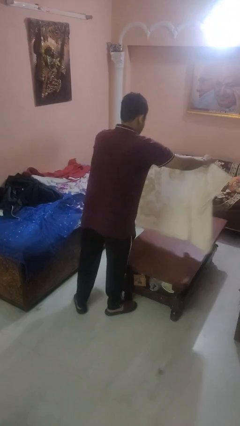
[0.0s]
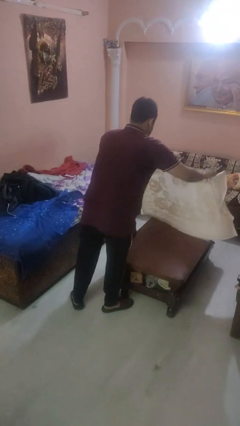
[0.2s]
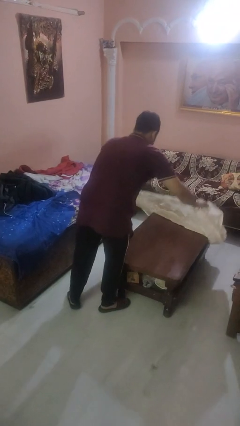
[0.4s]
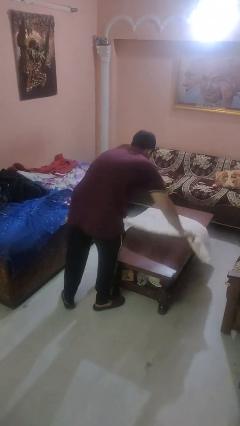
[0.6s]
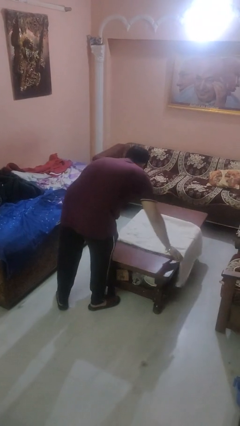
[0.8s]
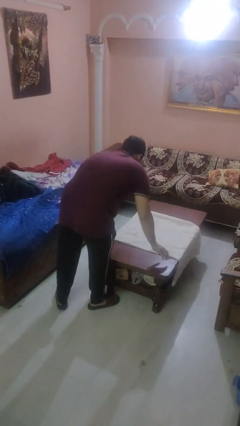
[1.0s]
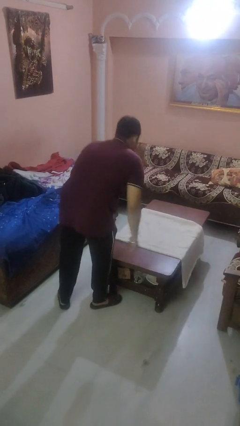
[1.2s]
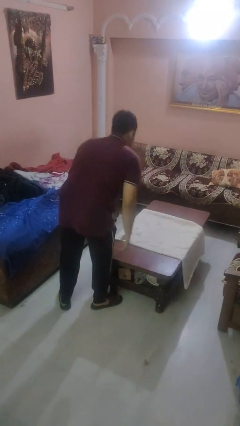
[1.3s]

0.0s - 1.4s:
person spreads tablecloth

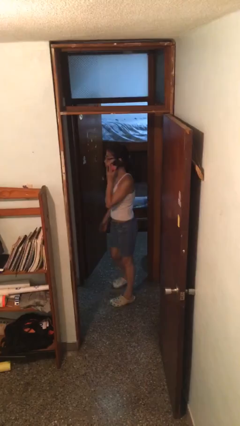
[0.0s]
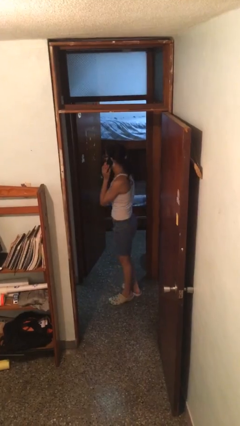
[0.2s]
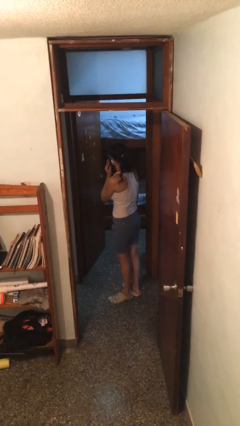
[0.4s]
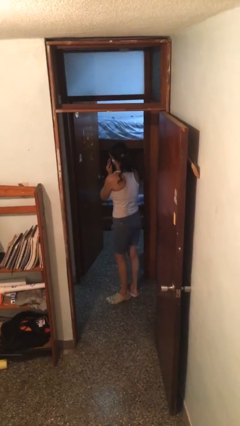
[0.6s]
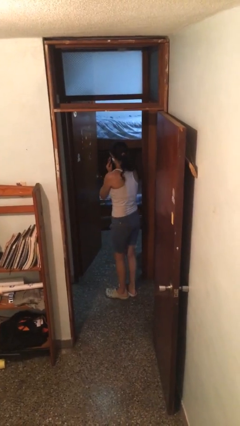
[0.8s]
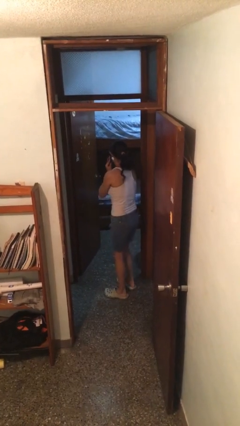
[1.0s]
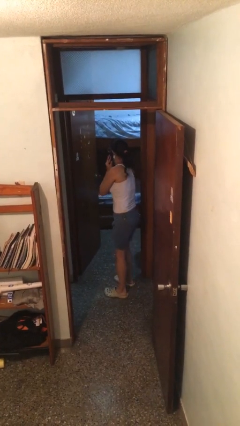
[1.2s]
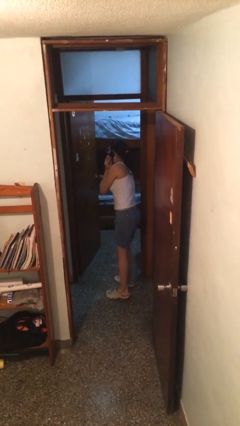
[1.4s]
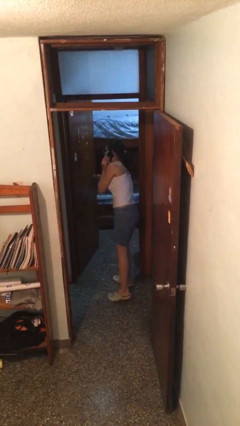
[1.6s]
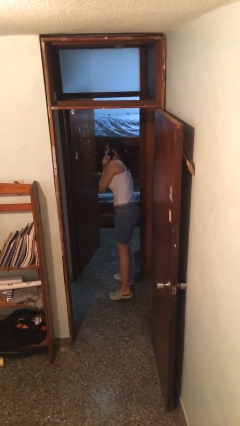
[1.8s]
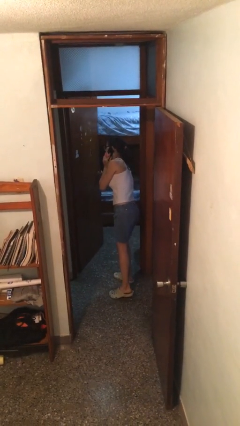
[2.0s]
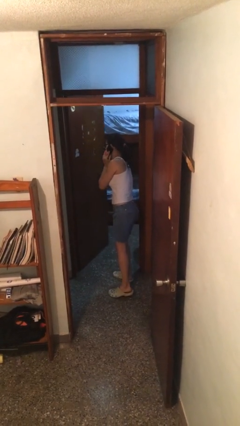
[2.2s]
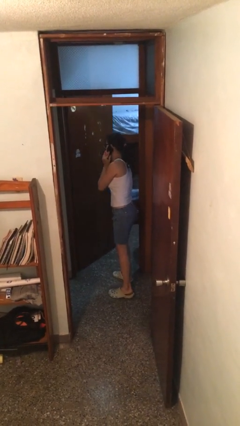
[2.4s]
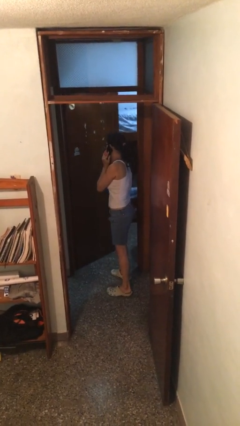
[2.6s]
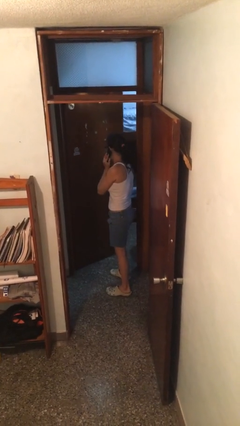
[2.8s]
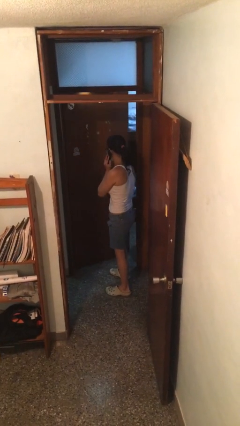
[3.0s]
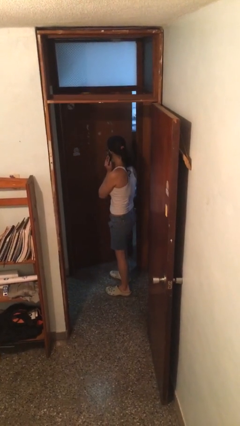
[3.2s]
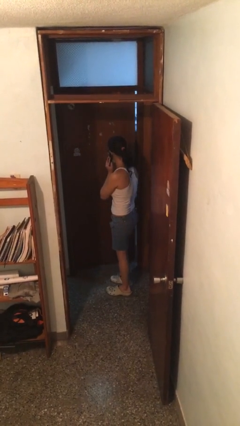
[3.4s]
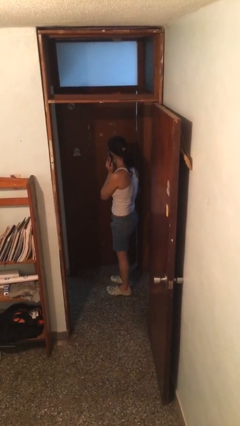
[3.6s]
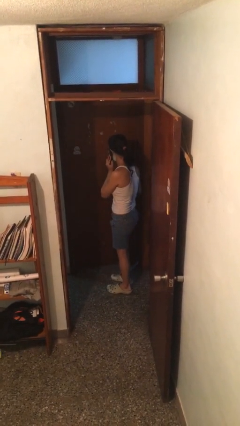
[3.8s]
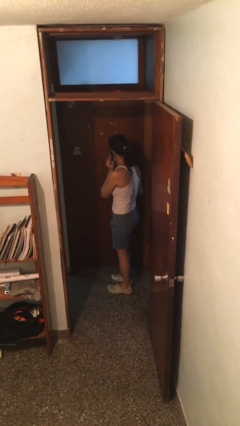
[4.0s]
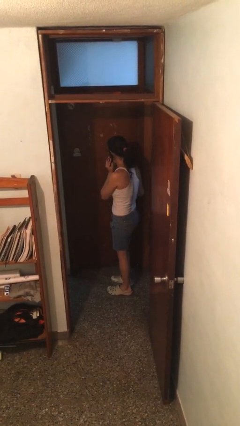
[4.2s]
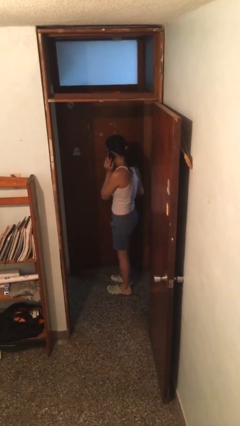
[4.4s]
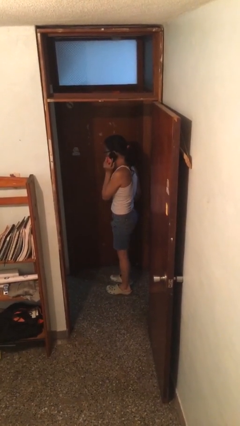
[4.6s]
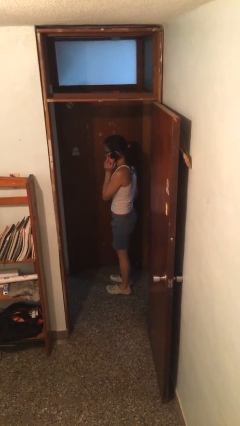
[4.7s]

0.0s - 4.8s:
person closes facility door

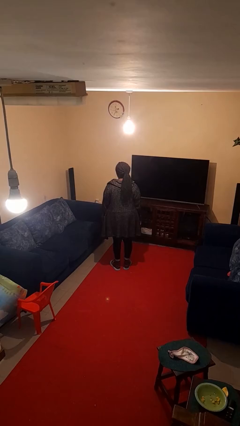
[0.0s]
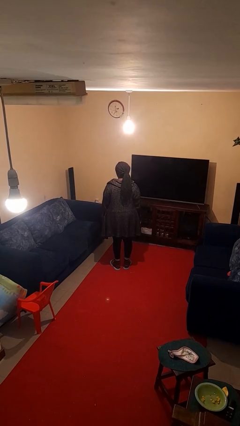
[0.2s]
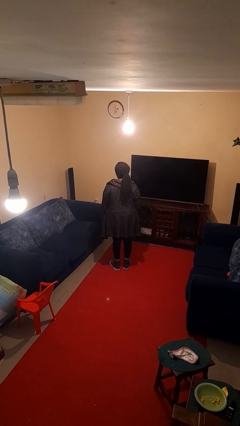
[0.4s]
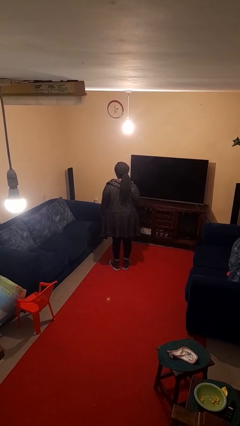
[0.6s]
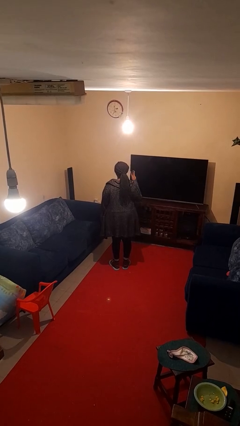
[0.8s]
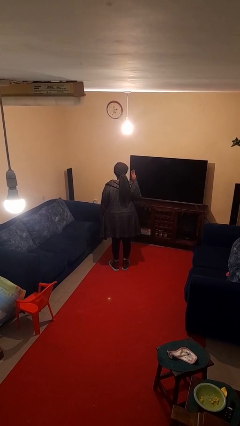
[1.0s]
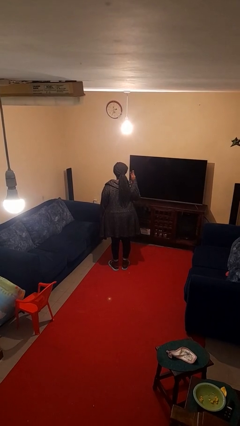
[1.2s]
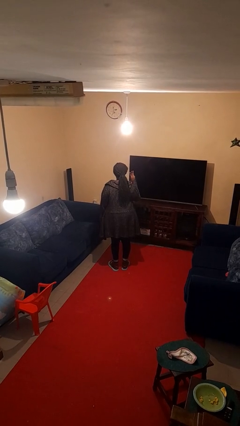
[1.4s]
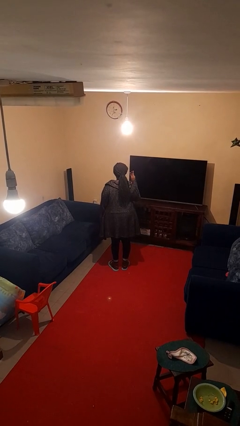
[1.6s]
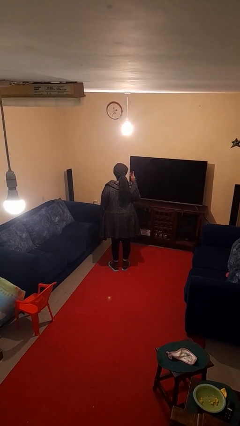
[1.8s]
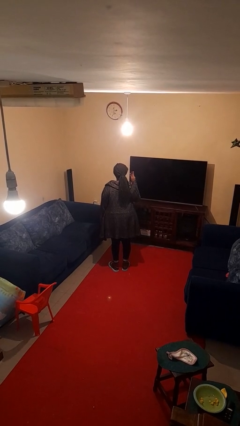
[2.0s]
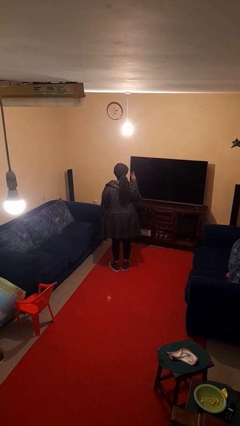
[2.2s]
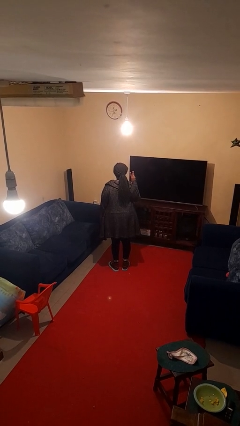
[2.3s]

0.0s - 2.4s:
person gestures number three

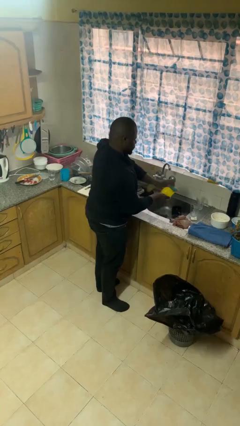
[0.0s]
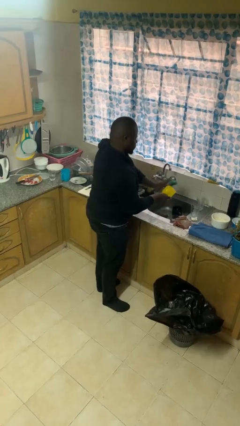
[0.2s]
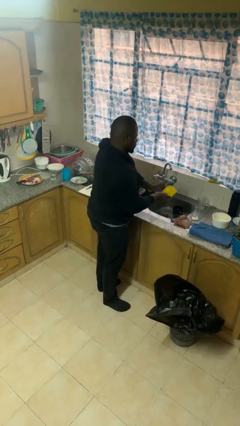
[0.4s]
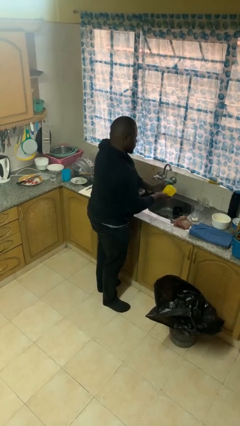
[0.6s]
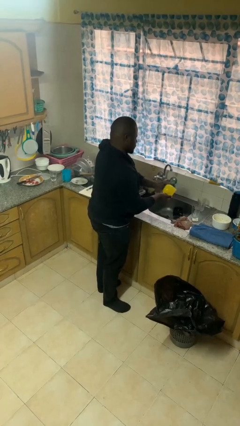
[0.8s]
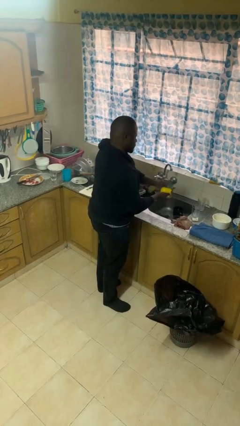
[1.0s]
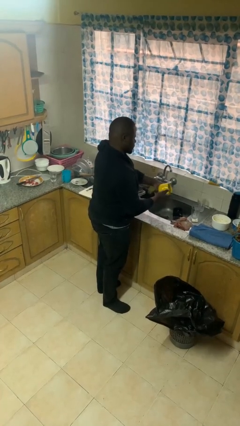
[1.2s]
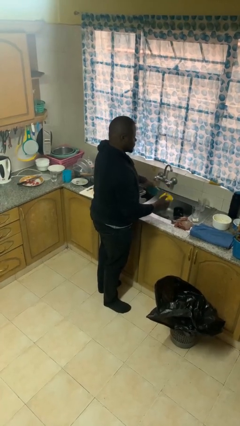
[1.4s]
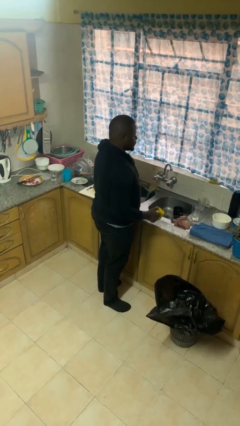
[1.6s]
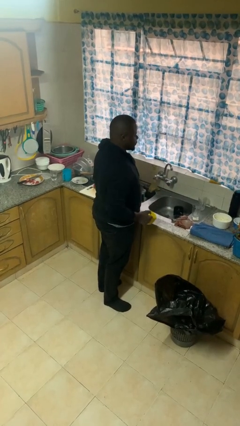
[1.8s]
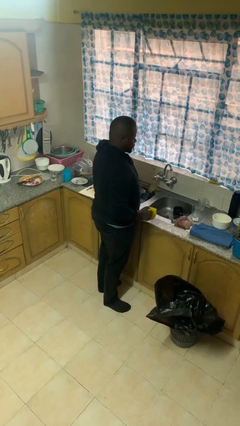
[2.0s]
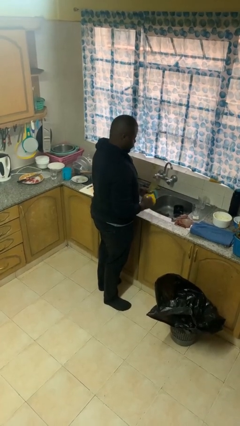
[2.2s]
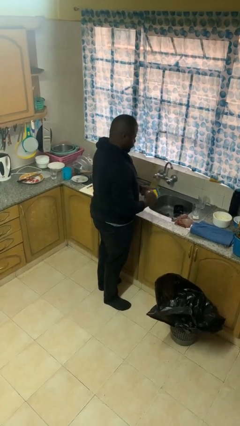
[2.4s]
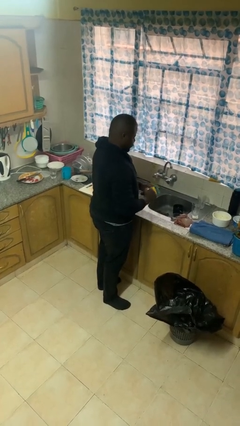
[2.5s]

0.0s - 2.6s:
person washes dish

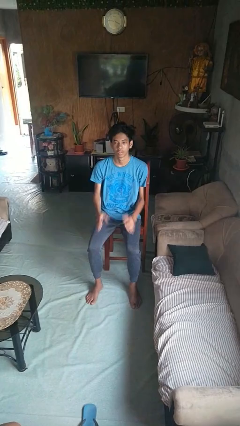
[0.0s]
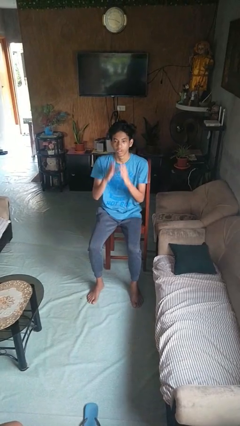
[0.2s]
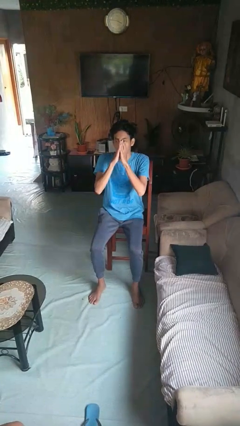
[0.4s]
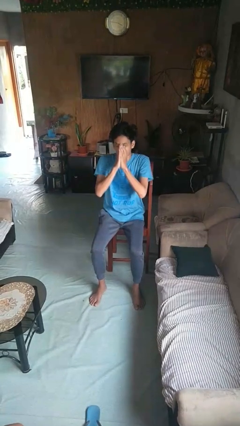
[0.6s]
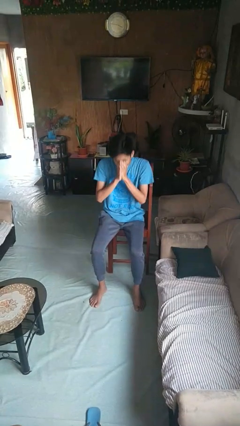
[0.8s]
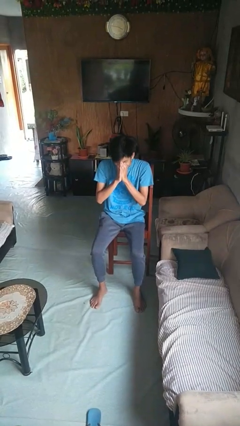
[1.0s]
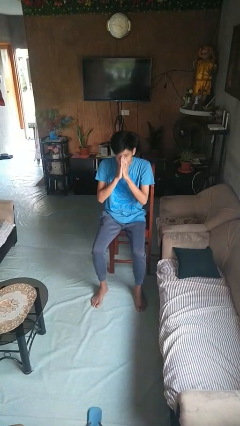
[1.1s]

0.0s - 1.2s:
person sneezes into hand

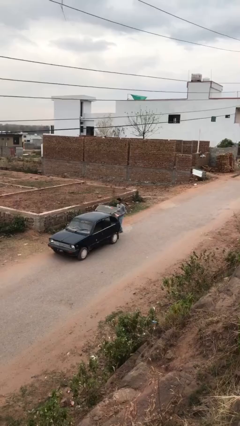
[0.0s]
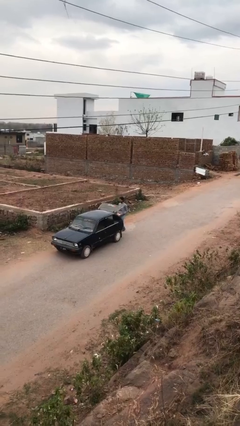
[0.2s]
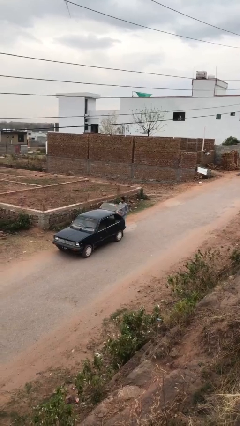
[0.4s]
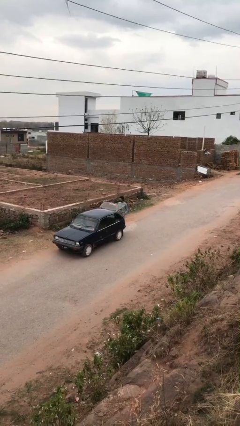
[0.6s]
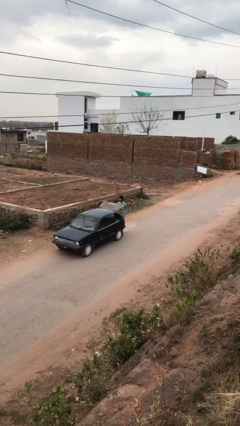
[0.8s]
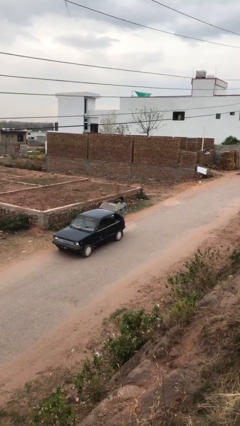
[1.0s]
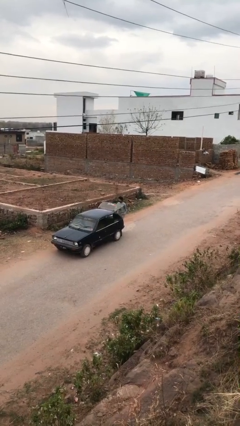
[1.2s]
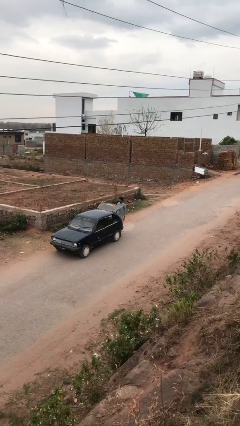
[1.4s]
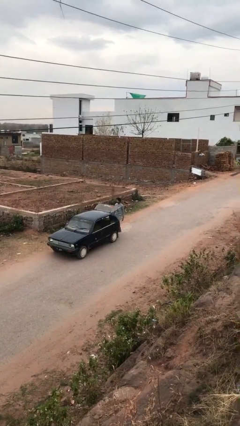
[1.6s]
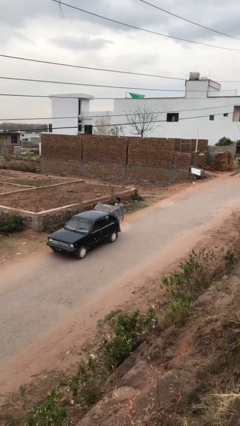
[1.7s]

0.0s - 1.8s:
person loads car

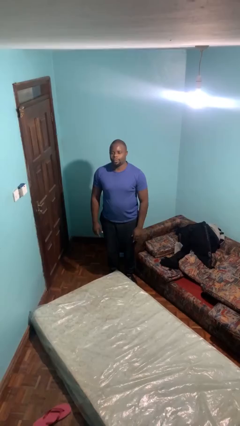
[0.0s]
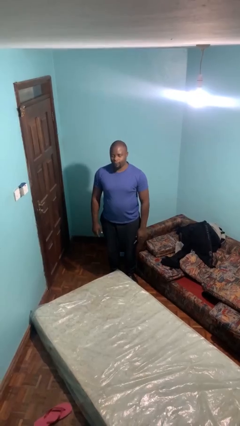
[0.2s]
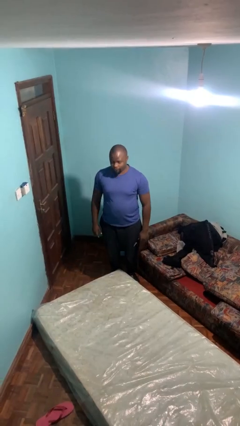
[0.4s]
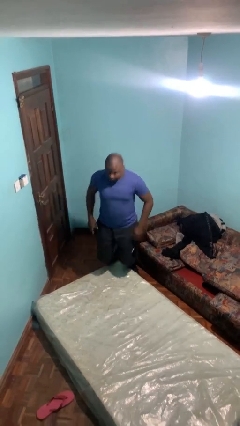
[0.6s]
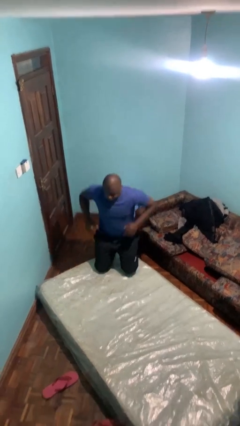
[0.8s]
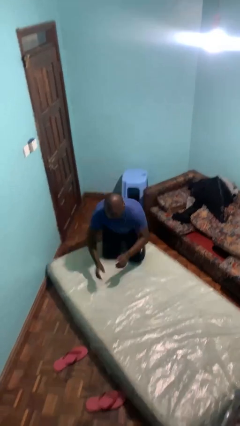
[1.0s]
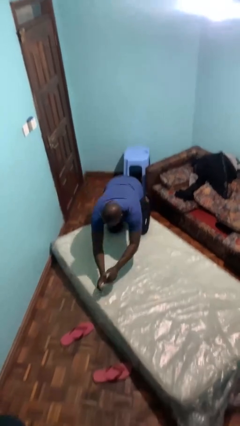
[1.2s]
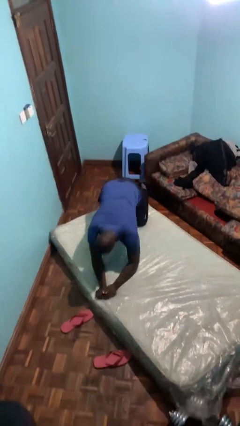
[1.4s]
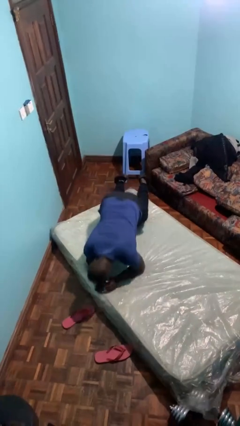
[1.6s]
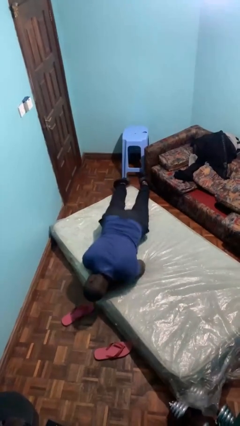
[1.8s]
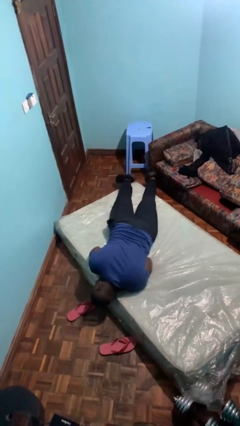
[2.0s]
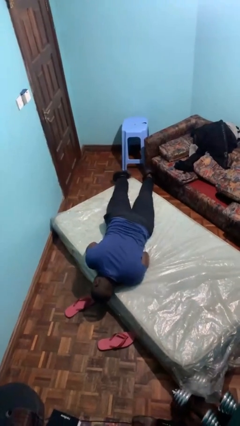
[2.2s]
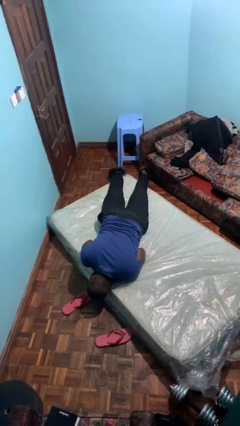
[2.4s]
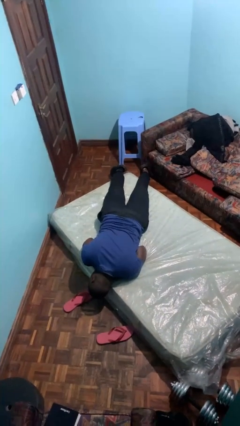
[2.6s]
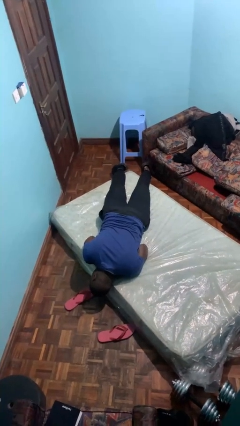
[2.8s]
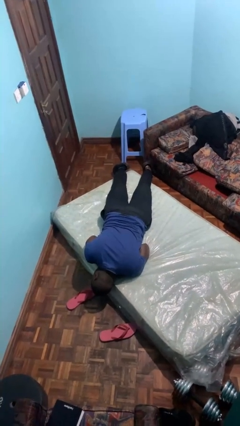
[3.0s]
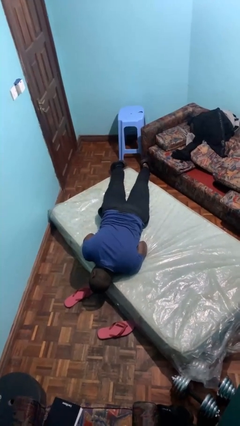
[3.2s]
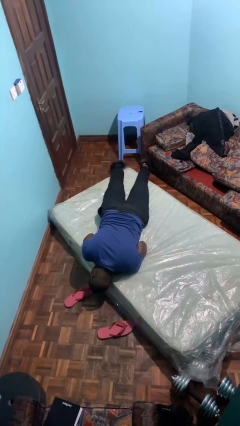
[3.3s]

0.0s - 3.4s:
person lies down on bed
